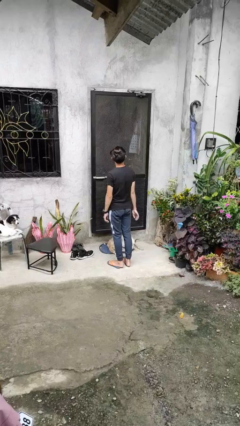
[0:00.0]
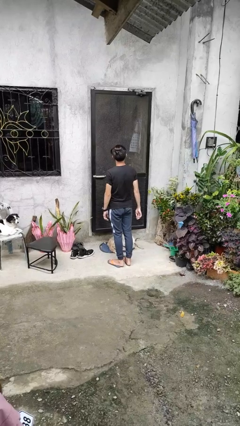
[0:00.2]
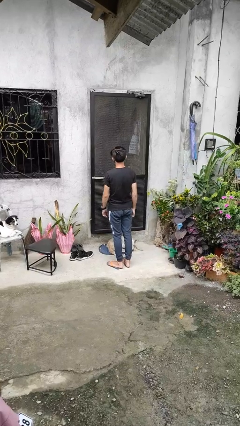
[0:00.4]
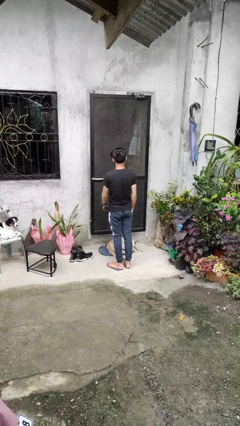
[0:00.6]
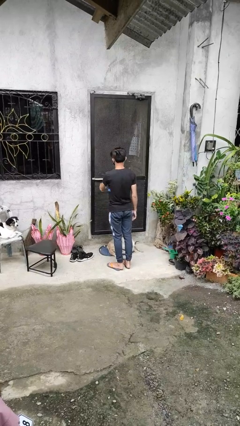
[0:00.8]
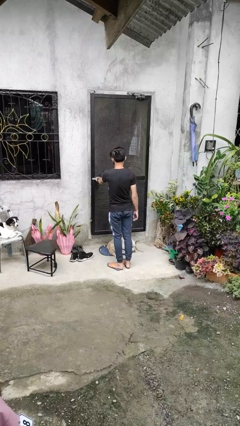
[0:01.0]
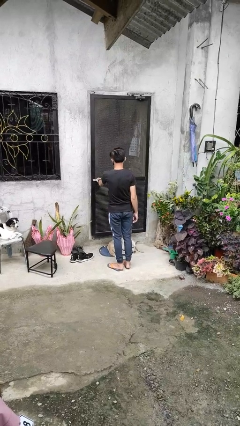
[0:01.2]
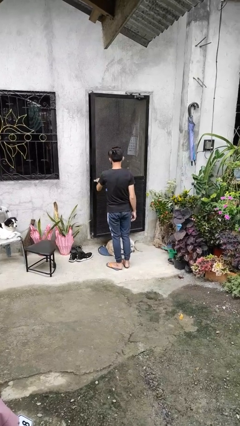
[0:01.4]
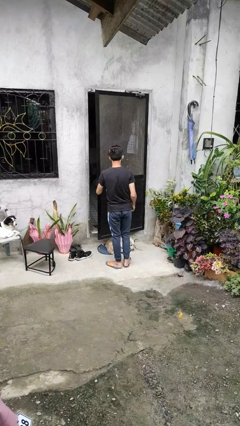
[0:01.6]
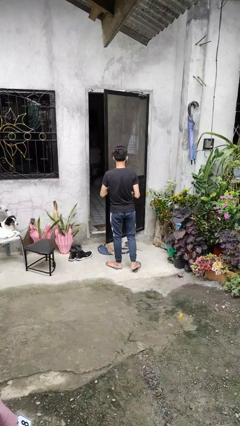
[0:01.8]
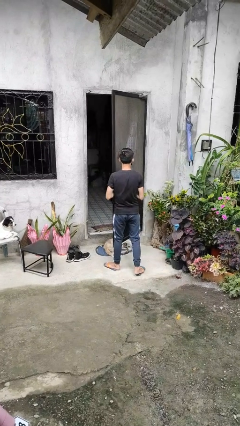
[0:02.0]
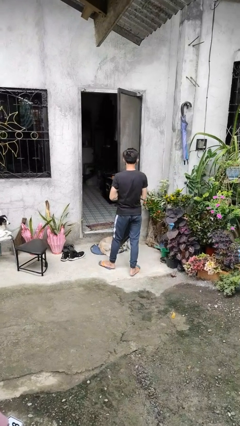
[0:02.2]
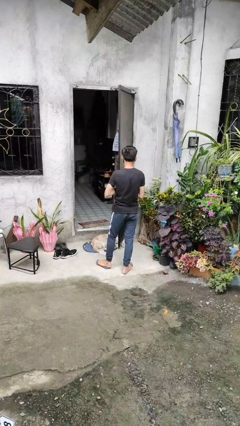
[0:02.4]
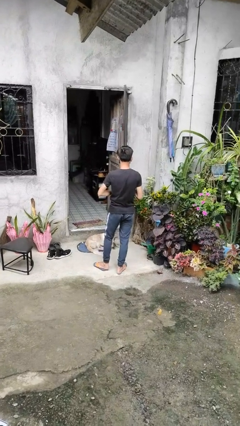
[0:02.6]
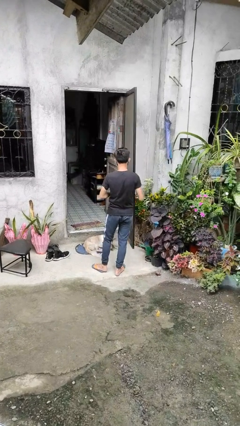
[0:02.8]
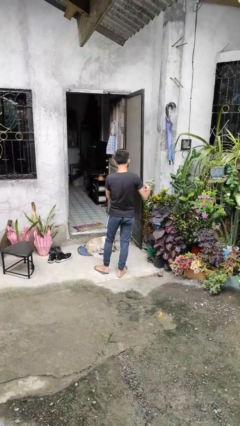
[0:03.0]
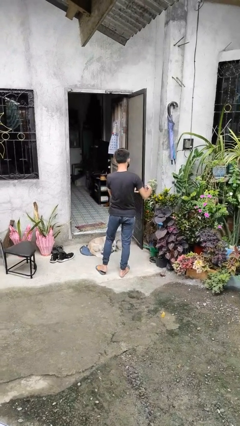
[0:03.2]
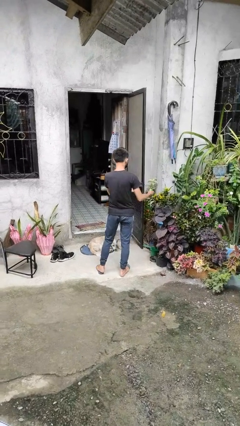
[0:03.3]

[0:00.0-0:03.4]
person opens facility door

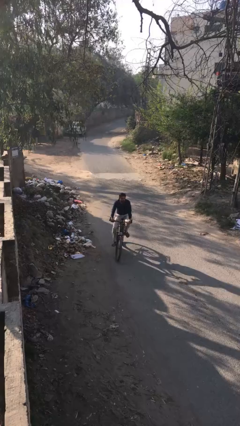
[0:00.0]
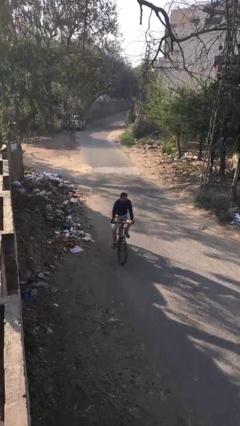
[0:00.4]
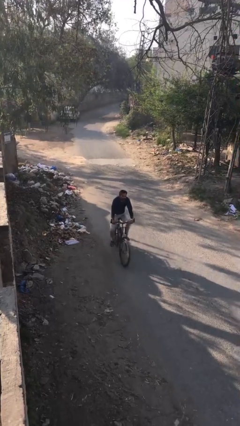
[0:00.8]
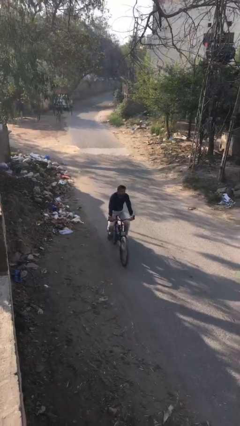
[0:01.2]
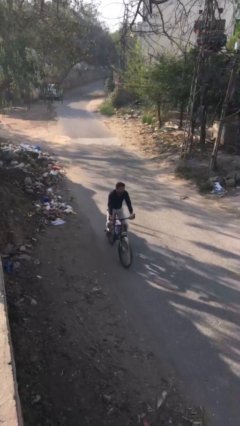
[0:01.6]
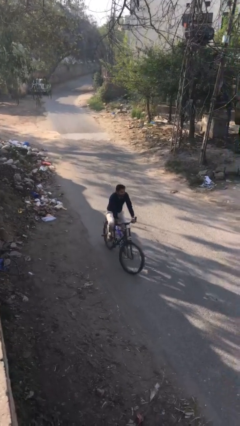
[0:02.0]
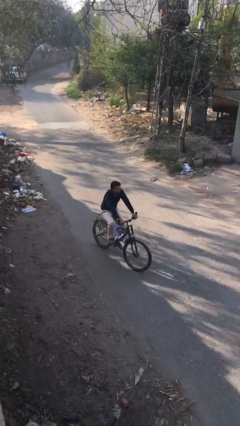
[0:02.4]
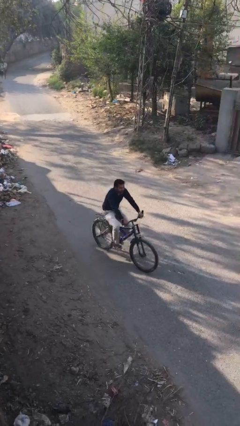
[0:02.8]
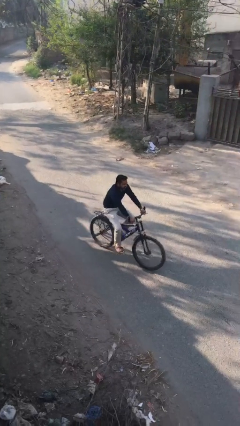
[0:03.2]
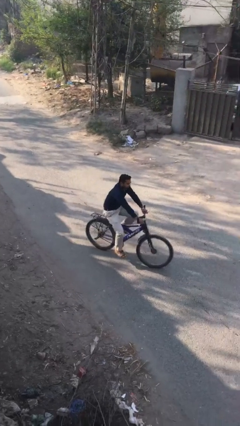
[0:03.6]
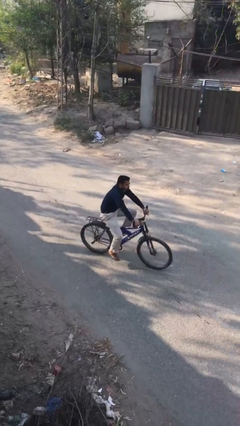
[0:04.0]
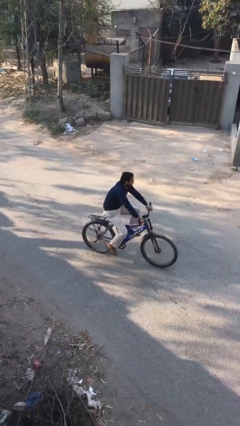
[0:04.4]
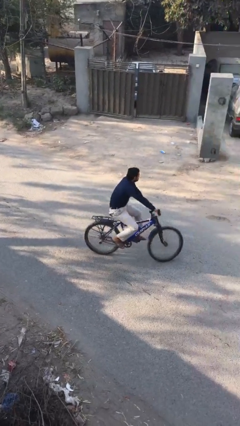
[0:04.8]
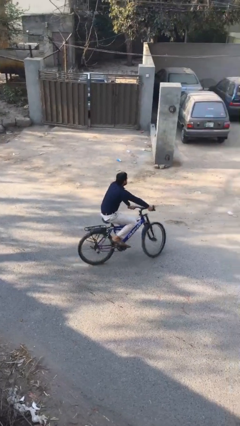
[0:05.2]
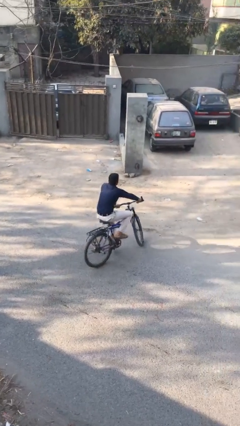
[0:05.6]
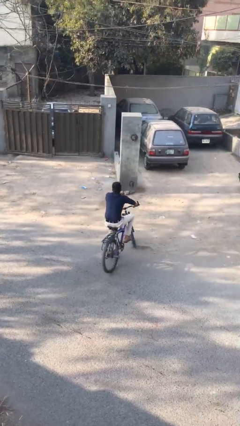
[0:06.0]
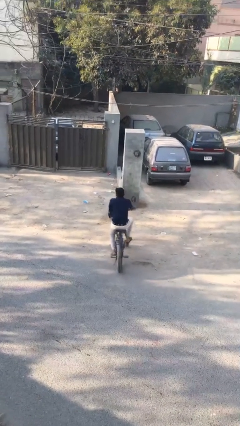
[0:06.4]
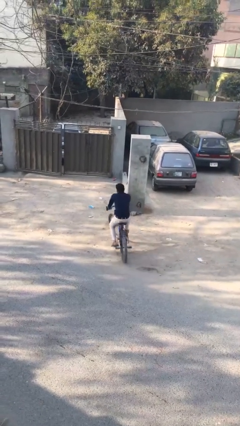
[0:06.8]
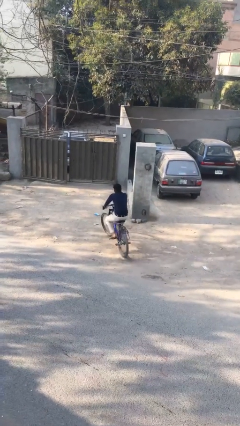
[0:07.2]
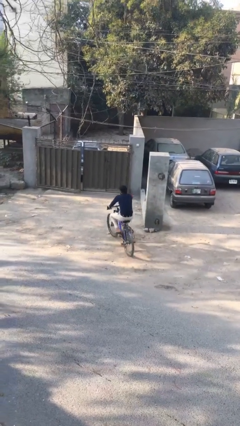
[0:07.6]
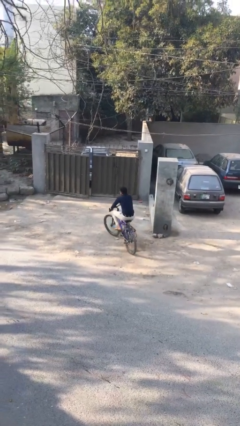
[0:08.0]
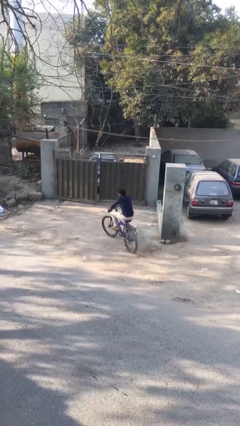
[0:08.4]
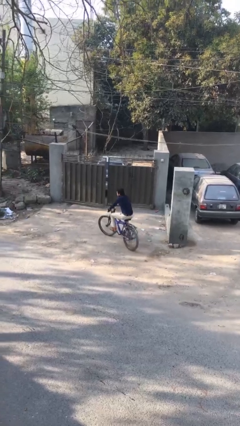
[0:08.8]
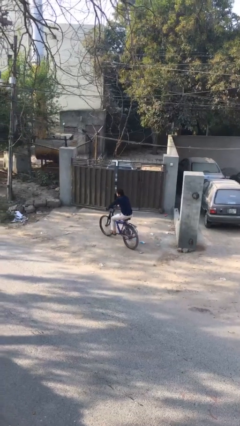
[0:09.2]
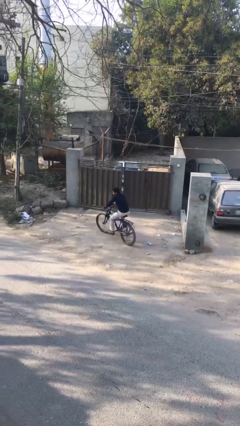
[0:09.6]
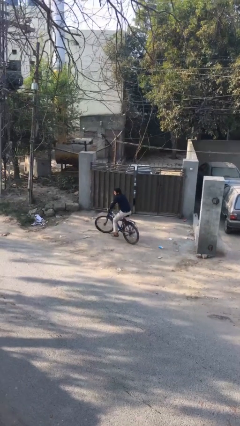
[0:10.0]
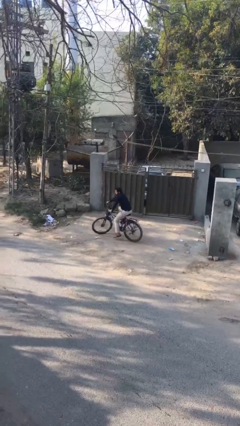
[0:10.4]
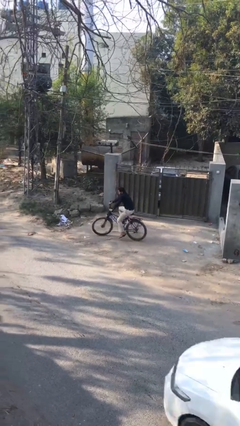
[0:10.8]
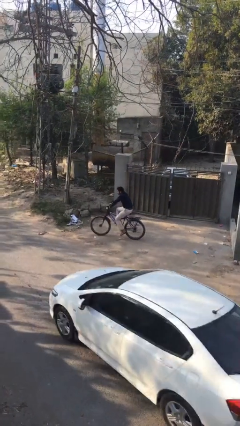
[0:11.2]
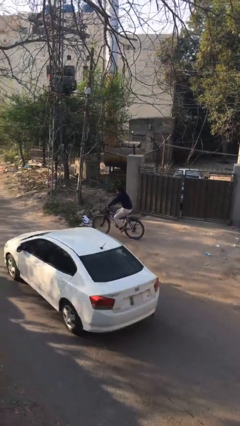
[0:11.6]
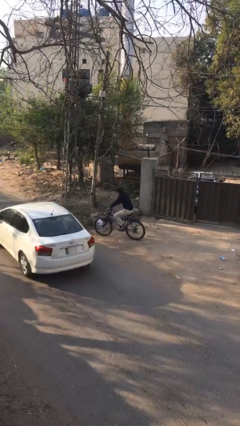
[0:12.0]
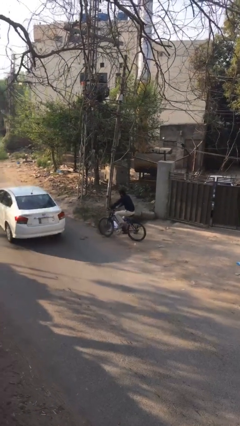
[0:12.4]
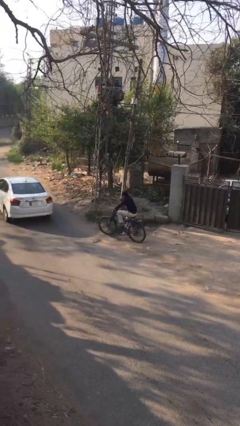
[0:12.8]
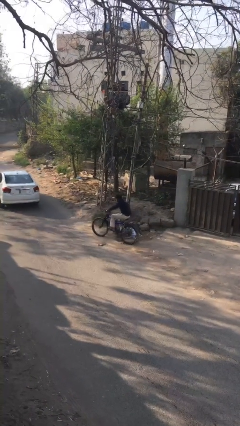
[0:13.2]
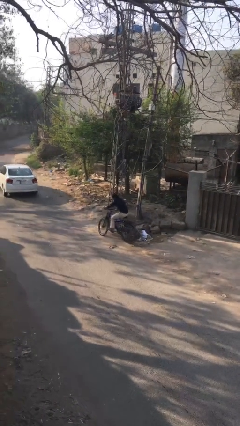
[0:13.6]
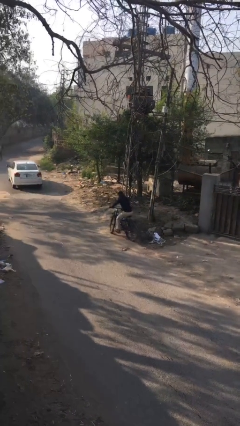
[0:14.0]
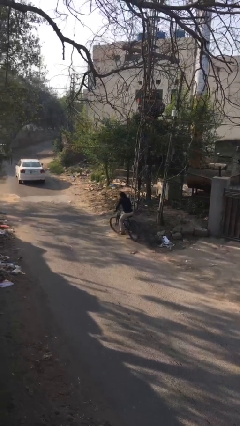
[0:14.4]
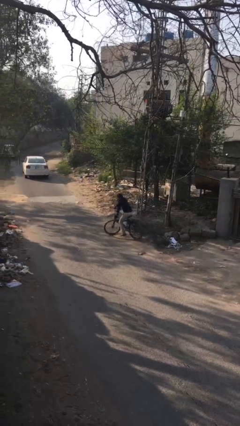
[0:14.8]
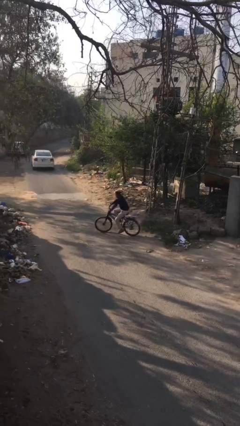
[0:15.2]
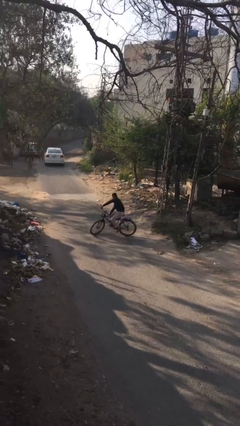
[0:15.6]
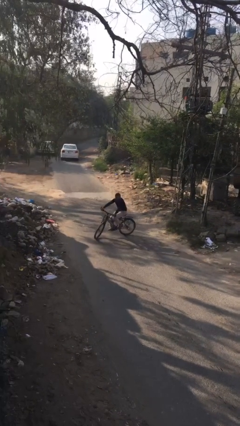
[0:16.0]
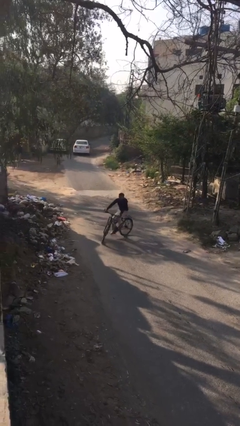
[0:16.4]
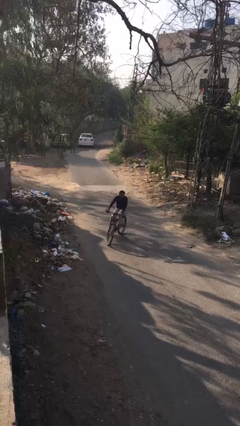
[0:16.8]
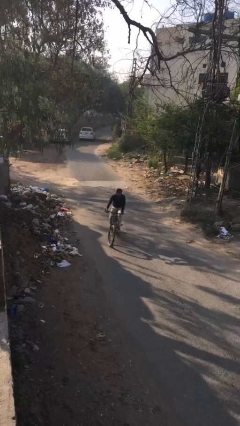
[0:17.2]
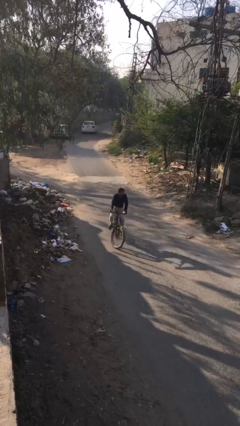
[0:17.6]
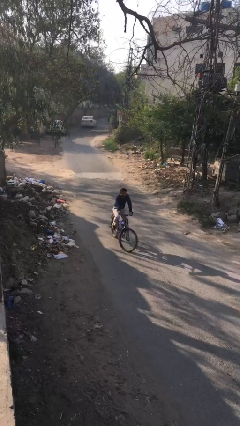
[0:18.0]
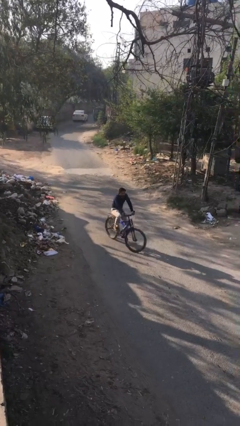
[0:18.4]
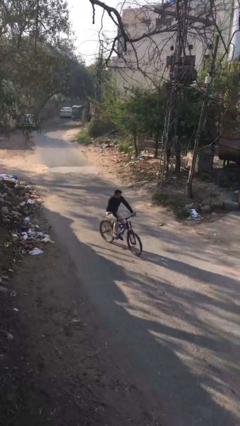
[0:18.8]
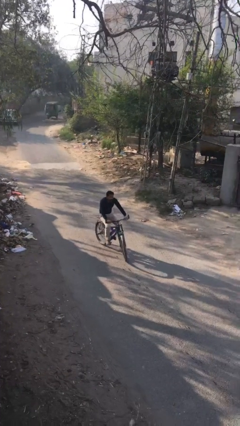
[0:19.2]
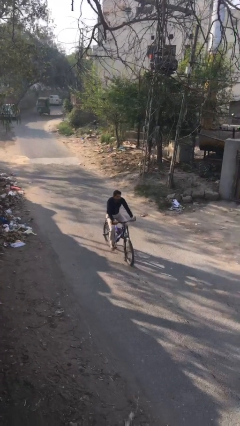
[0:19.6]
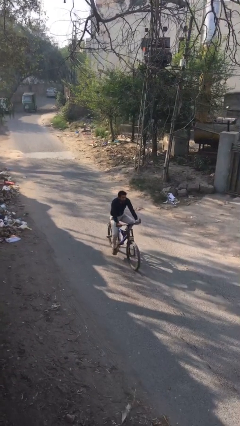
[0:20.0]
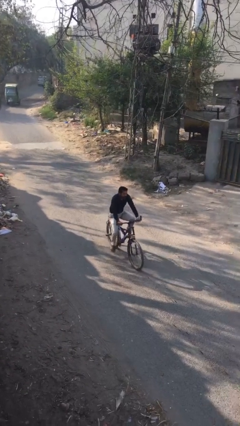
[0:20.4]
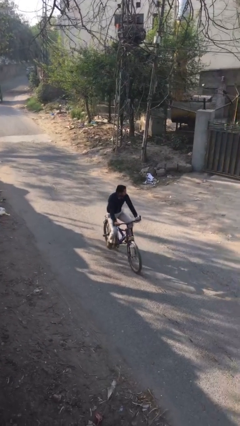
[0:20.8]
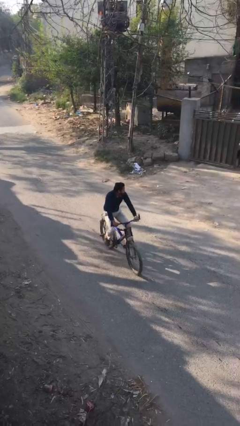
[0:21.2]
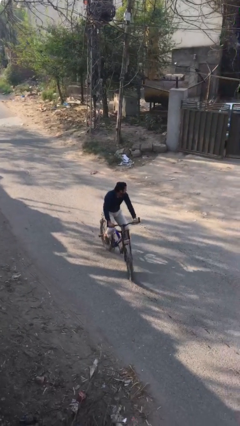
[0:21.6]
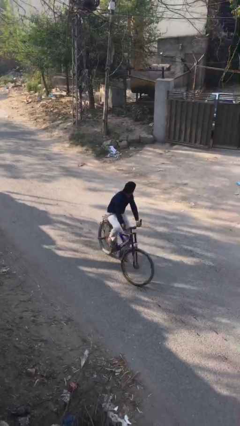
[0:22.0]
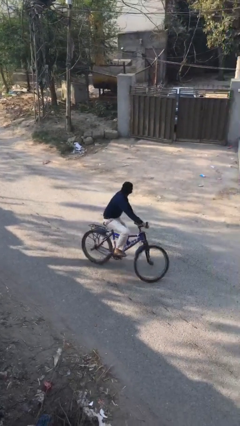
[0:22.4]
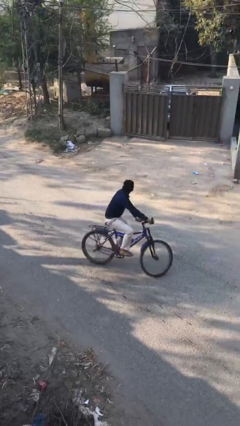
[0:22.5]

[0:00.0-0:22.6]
person rides bicycle

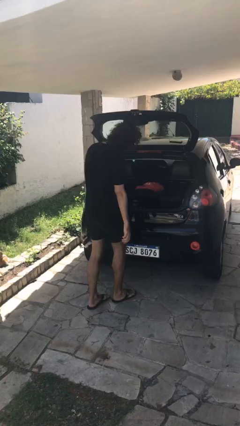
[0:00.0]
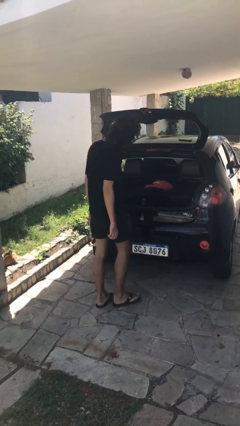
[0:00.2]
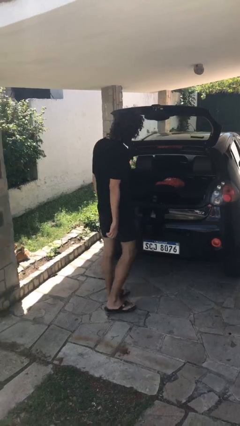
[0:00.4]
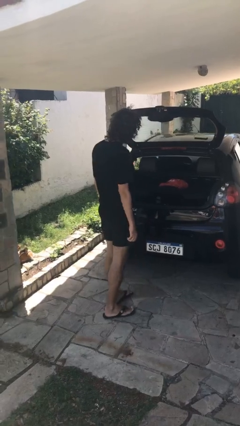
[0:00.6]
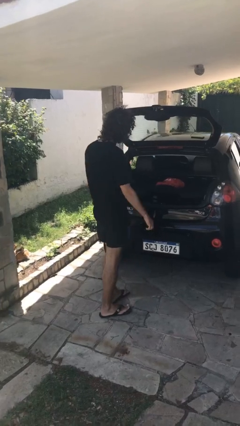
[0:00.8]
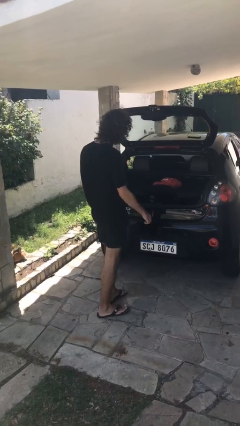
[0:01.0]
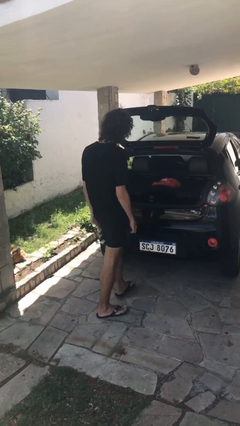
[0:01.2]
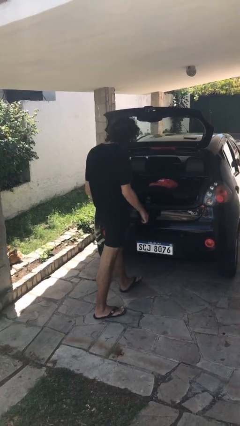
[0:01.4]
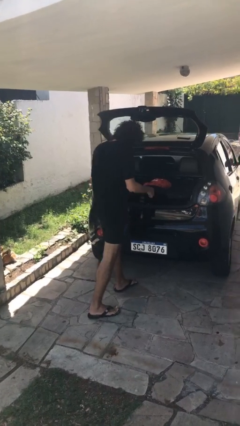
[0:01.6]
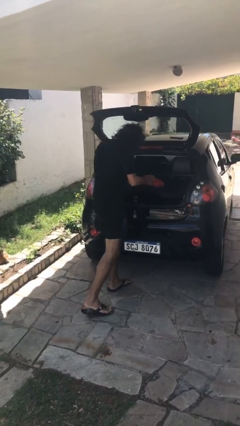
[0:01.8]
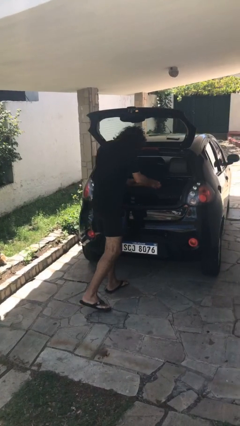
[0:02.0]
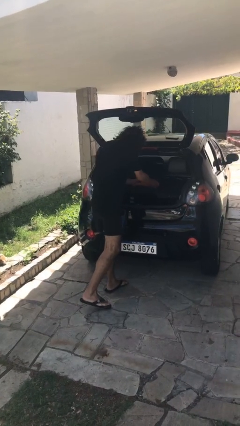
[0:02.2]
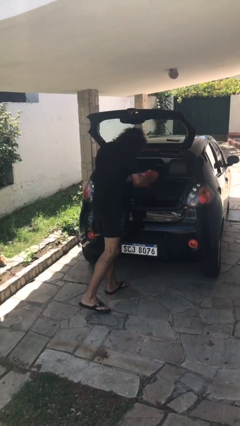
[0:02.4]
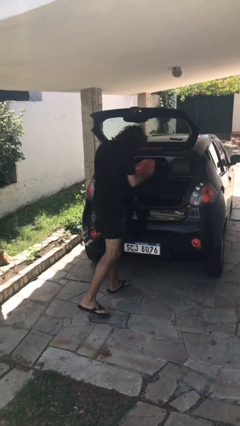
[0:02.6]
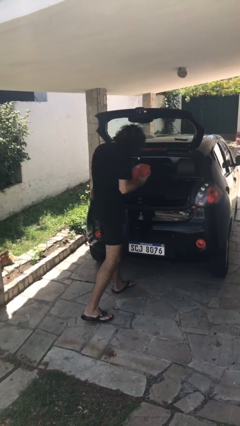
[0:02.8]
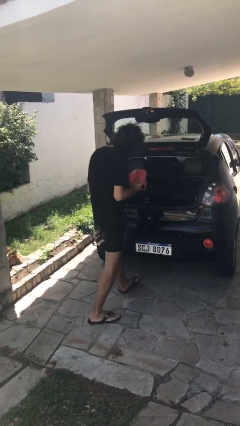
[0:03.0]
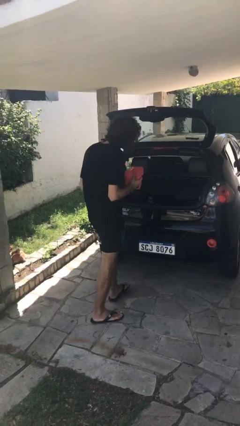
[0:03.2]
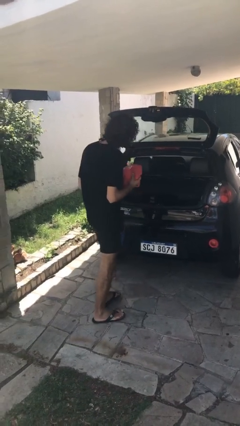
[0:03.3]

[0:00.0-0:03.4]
person unloads car
